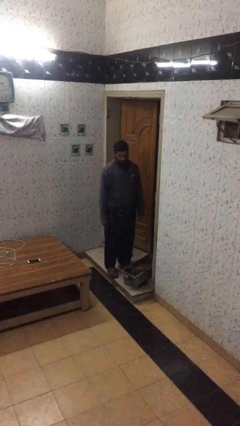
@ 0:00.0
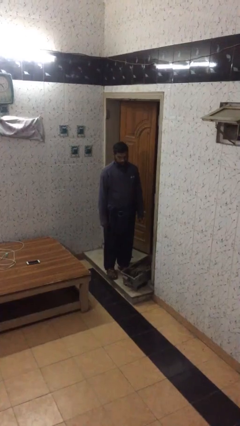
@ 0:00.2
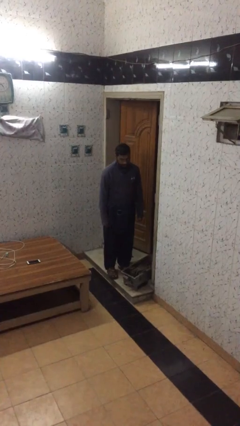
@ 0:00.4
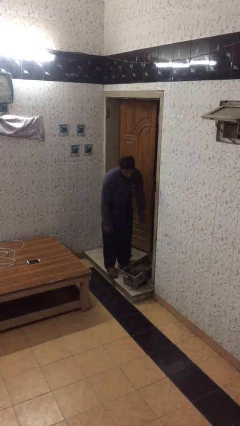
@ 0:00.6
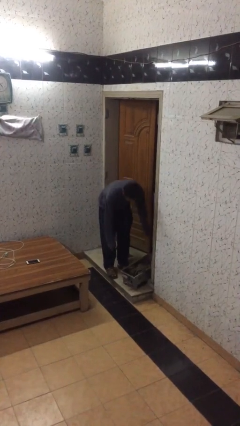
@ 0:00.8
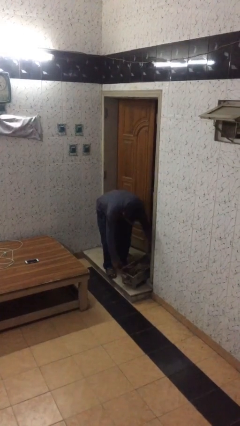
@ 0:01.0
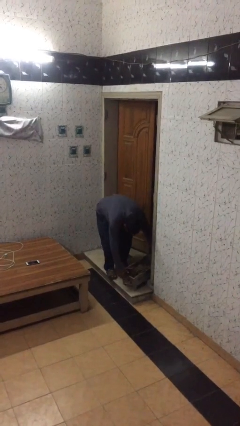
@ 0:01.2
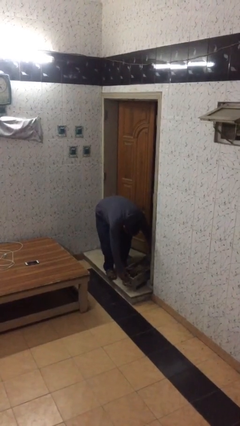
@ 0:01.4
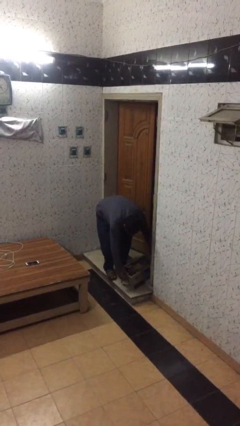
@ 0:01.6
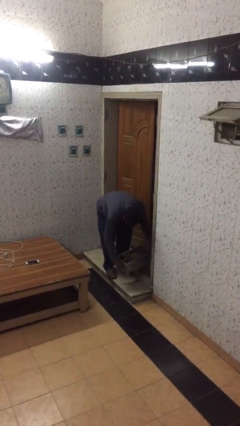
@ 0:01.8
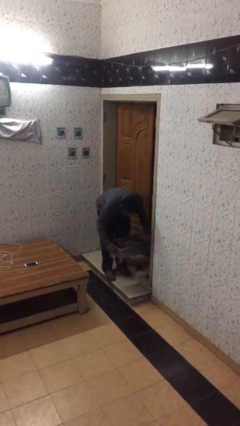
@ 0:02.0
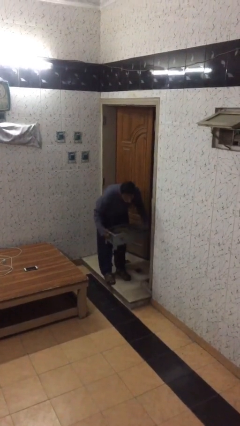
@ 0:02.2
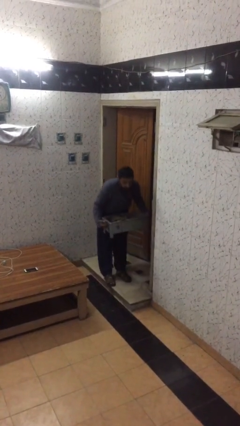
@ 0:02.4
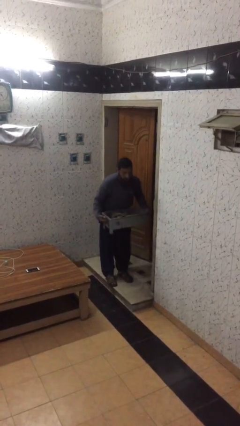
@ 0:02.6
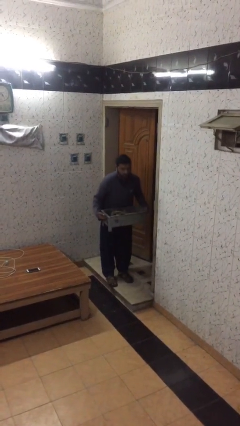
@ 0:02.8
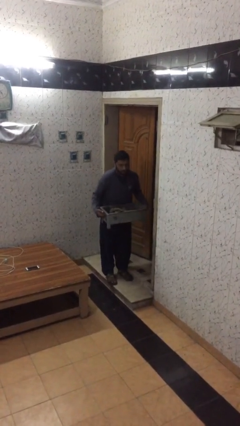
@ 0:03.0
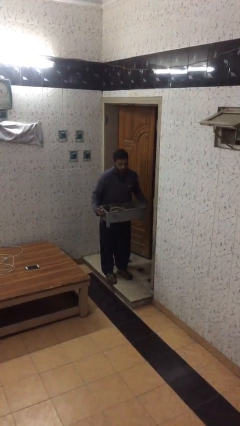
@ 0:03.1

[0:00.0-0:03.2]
person picks up object from floor

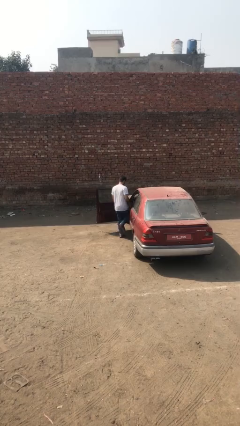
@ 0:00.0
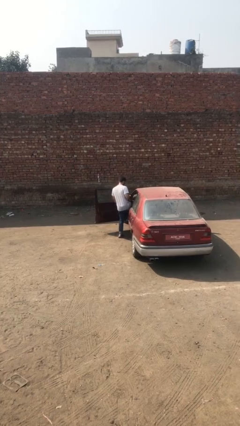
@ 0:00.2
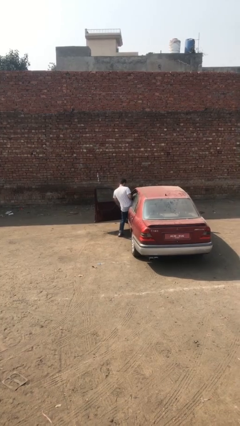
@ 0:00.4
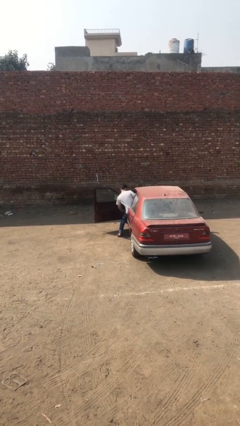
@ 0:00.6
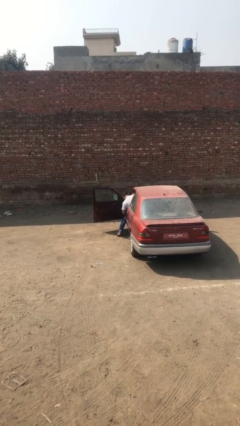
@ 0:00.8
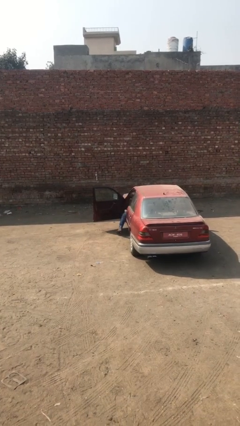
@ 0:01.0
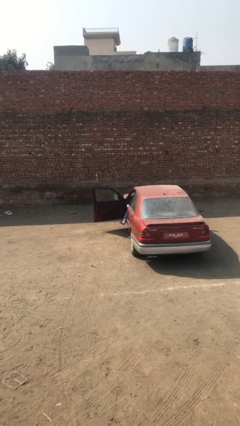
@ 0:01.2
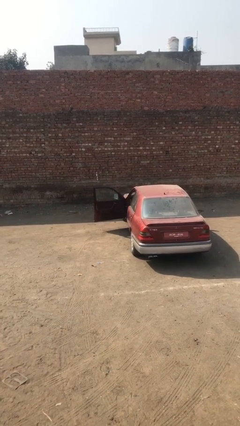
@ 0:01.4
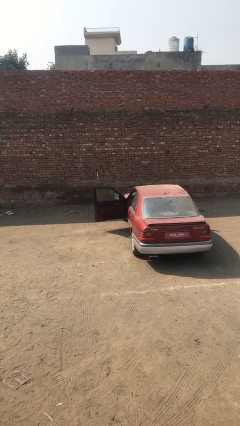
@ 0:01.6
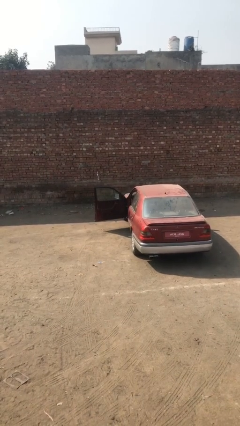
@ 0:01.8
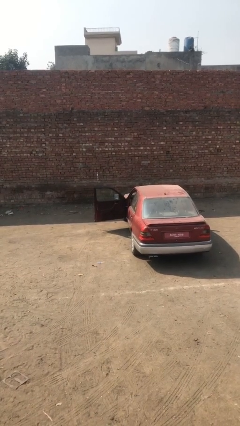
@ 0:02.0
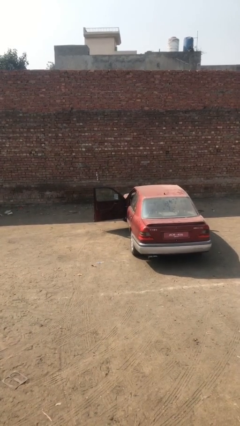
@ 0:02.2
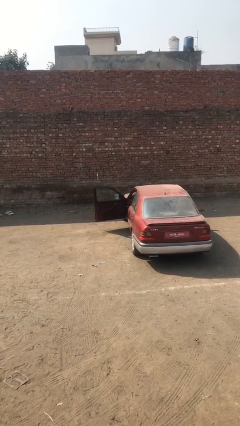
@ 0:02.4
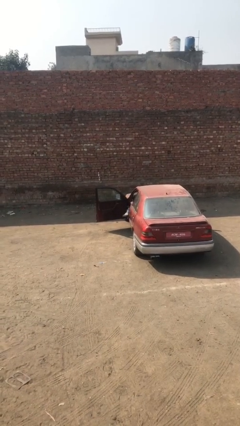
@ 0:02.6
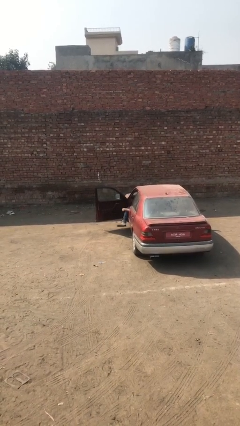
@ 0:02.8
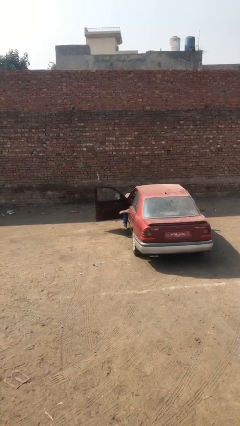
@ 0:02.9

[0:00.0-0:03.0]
person enters car

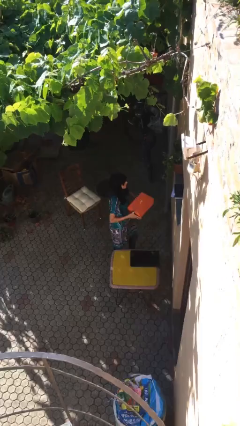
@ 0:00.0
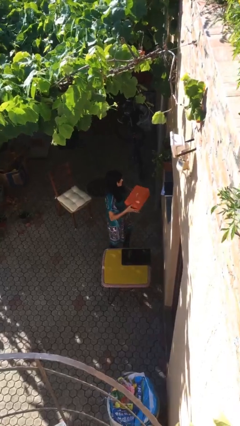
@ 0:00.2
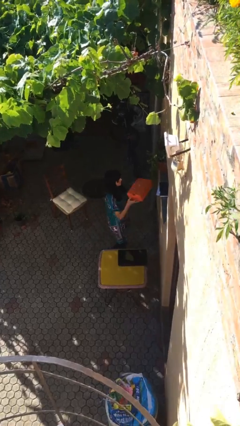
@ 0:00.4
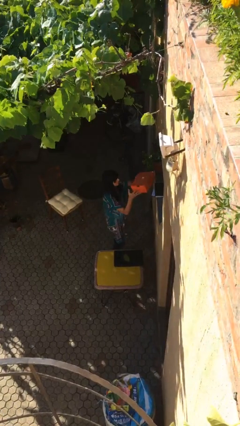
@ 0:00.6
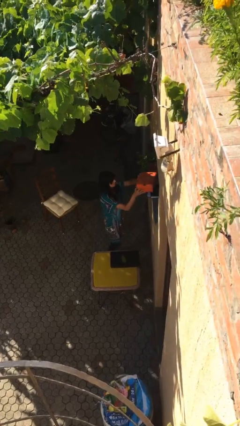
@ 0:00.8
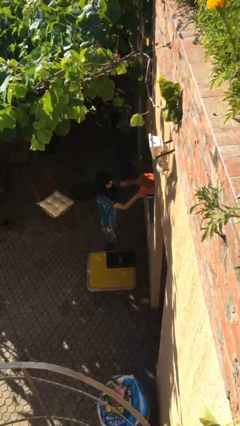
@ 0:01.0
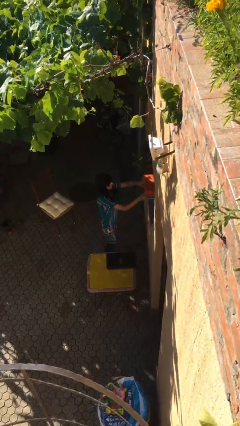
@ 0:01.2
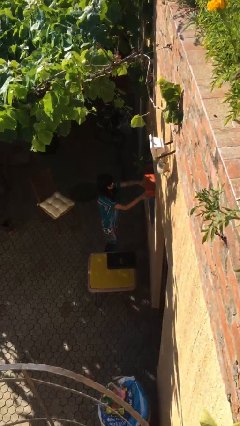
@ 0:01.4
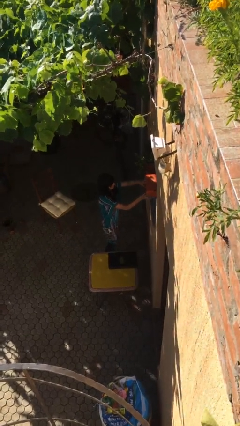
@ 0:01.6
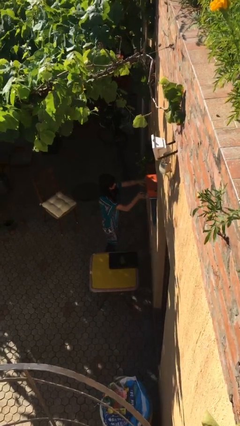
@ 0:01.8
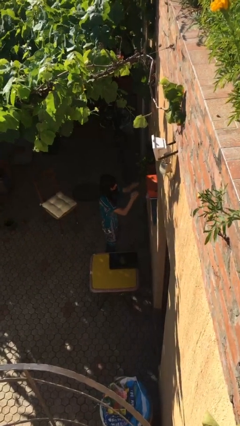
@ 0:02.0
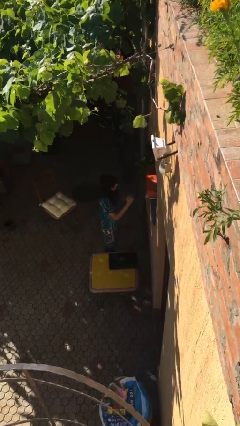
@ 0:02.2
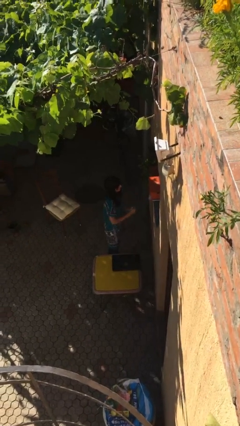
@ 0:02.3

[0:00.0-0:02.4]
person puts down object on shelf

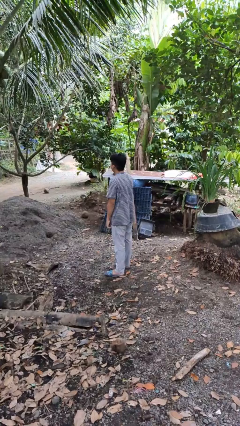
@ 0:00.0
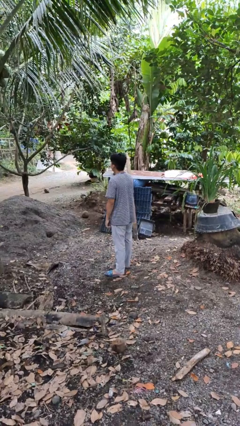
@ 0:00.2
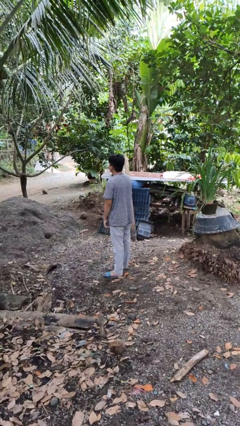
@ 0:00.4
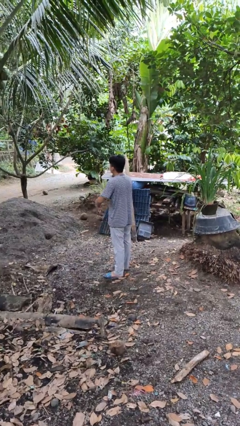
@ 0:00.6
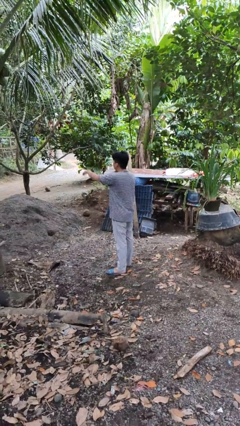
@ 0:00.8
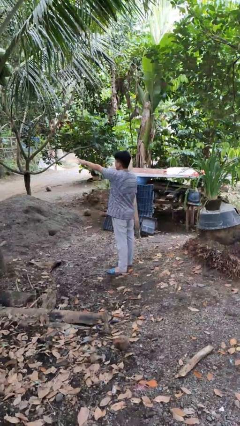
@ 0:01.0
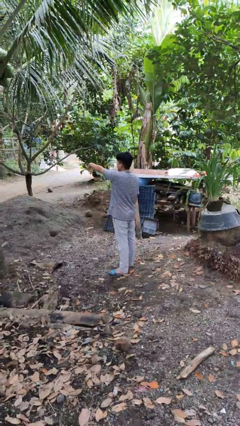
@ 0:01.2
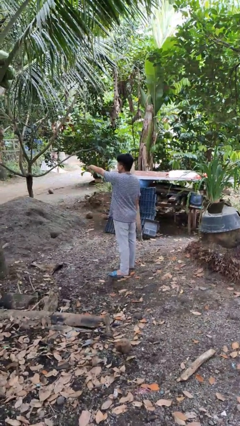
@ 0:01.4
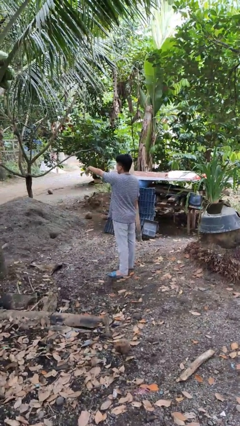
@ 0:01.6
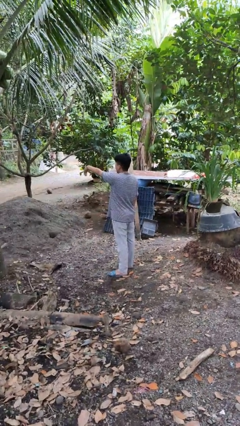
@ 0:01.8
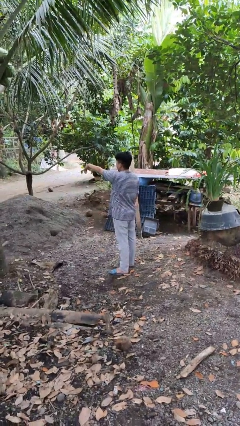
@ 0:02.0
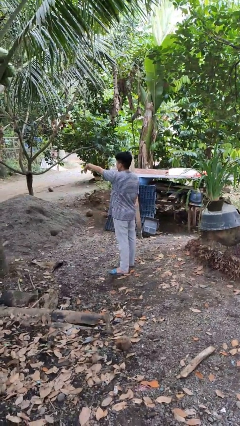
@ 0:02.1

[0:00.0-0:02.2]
person gestures come here

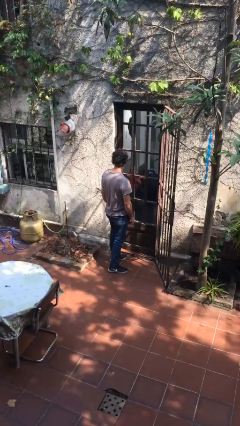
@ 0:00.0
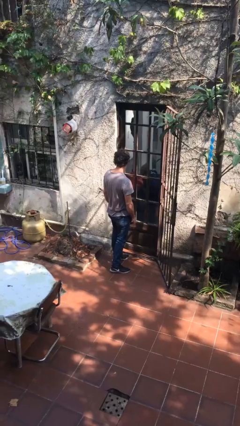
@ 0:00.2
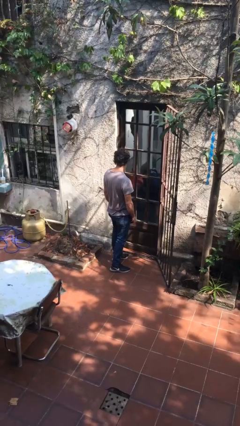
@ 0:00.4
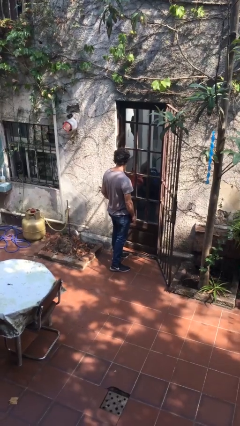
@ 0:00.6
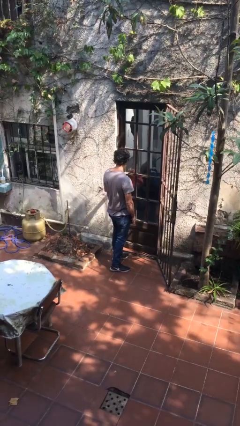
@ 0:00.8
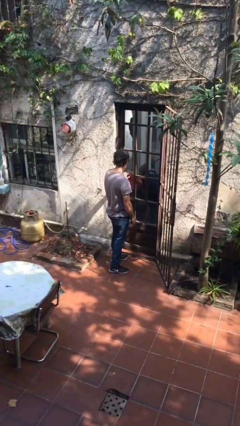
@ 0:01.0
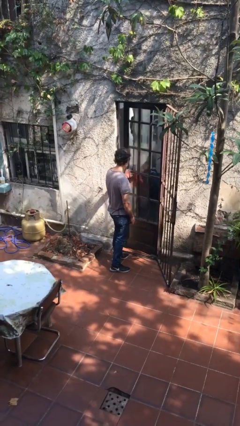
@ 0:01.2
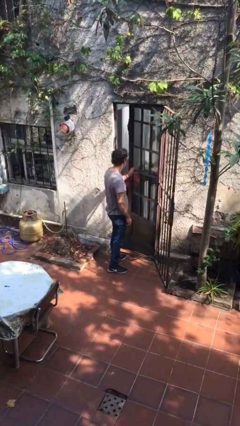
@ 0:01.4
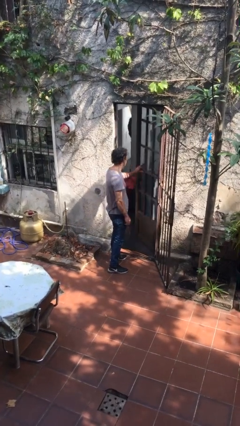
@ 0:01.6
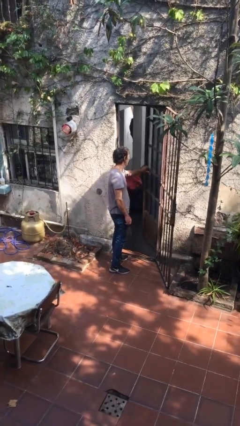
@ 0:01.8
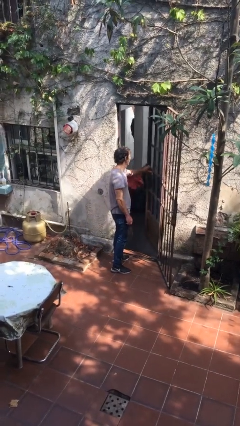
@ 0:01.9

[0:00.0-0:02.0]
person opens facility door

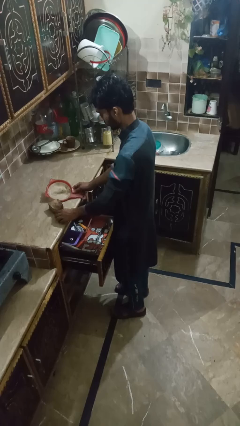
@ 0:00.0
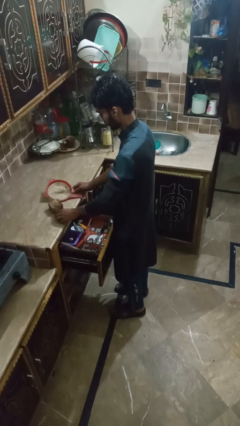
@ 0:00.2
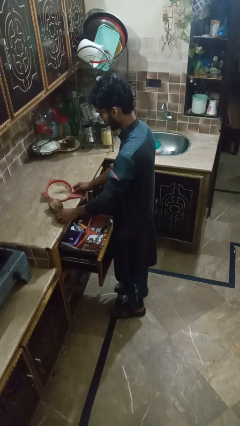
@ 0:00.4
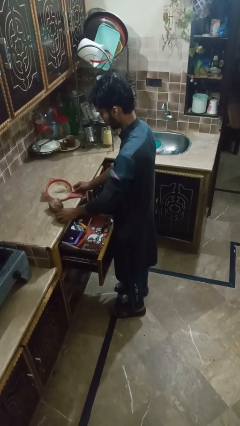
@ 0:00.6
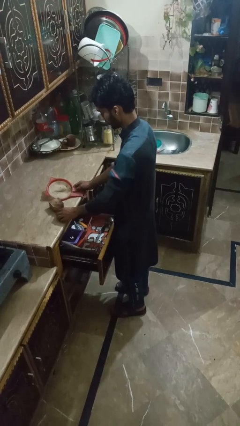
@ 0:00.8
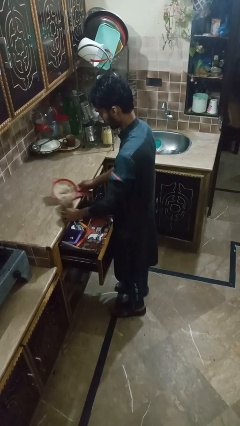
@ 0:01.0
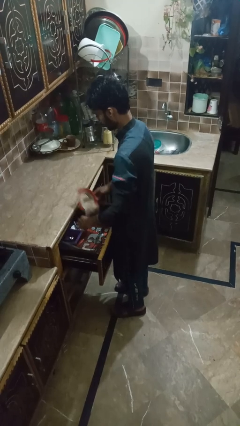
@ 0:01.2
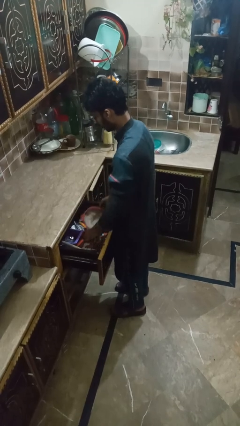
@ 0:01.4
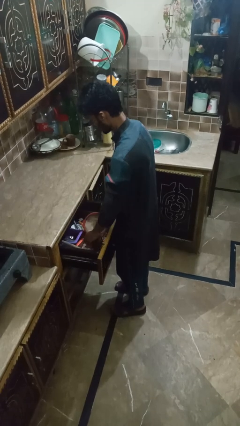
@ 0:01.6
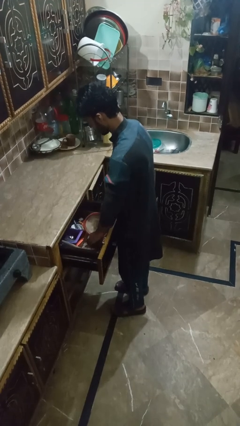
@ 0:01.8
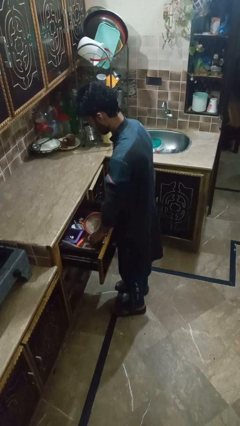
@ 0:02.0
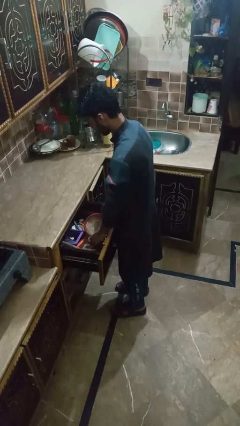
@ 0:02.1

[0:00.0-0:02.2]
person takes object from kitchen drawer

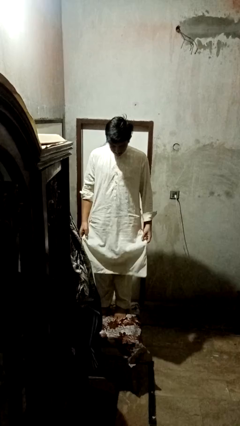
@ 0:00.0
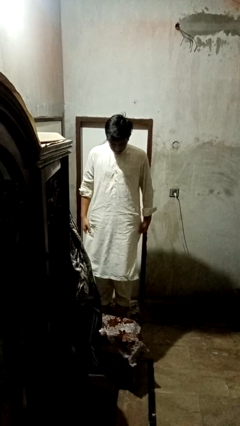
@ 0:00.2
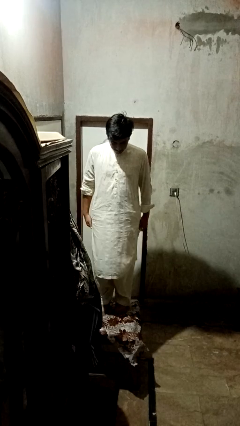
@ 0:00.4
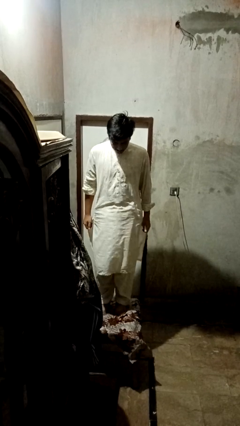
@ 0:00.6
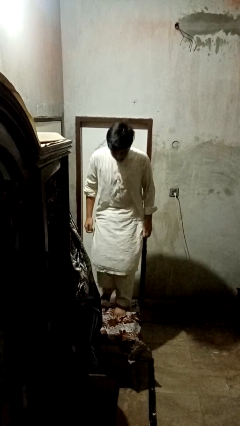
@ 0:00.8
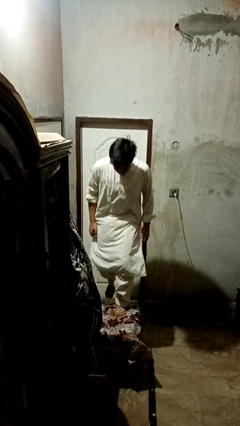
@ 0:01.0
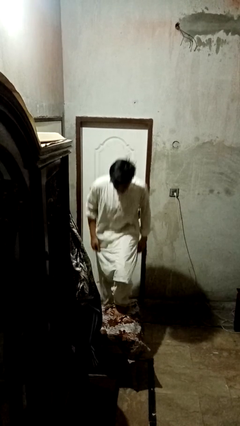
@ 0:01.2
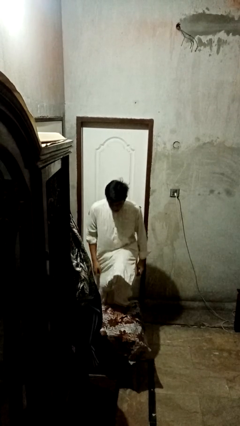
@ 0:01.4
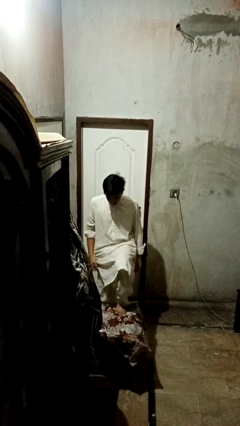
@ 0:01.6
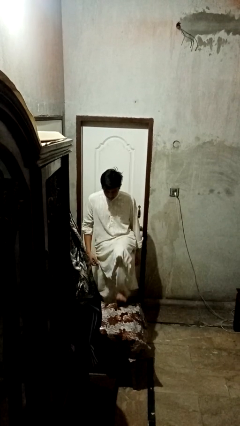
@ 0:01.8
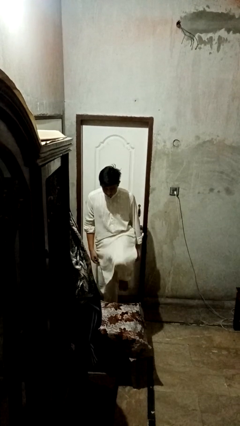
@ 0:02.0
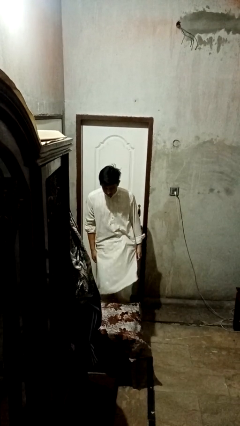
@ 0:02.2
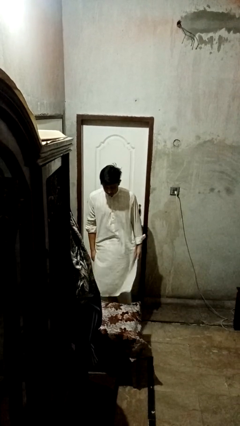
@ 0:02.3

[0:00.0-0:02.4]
person climbs off table
